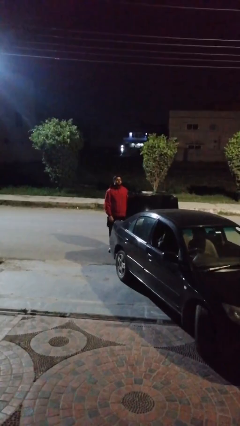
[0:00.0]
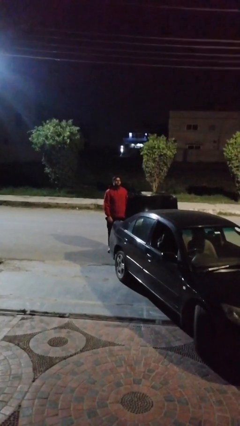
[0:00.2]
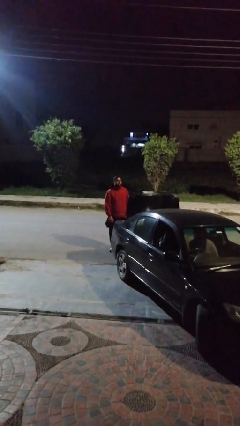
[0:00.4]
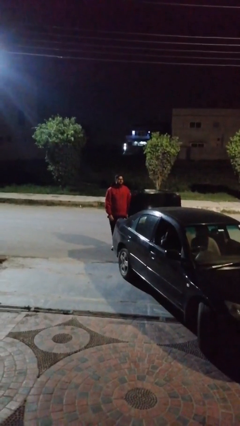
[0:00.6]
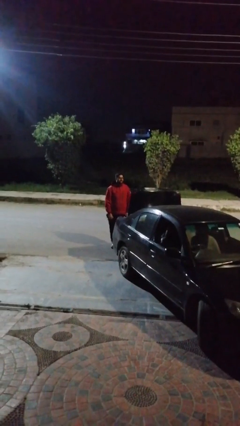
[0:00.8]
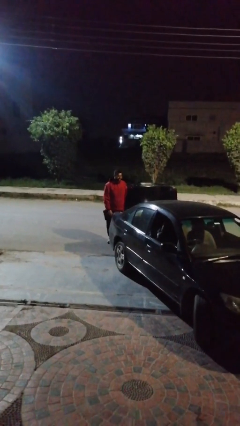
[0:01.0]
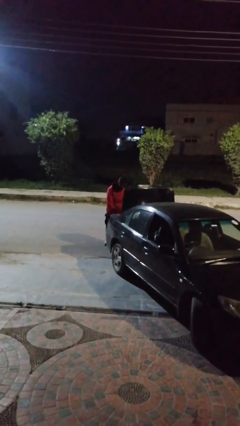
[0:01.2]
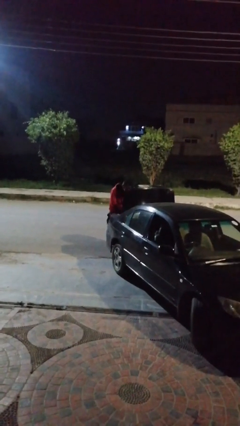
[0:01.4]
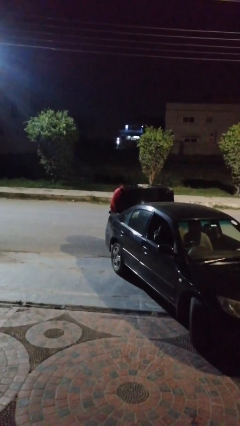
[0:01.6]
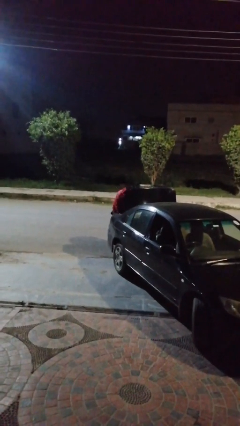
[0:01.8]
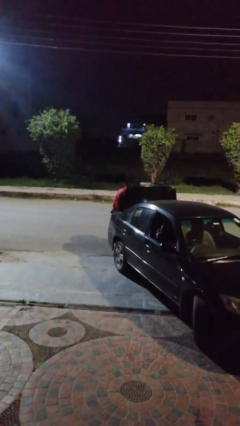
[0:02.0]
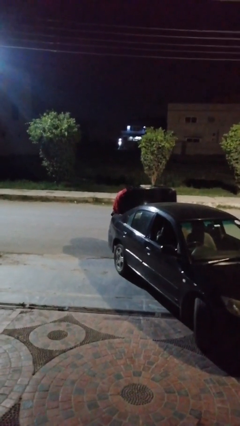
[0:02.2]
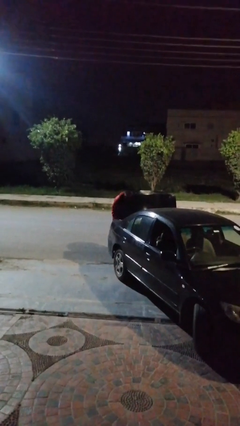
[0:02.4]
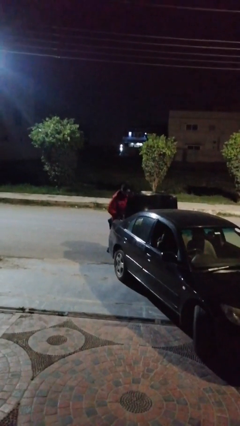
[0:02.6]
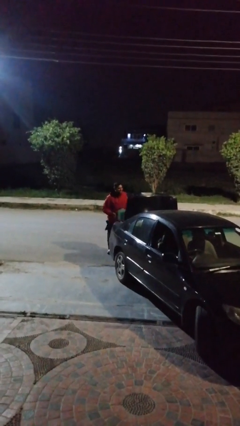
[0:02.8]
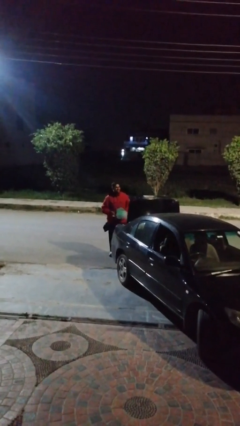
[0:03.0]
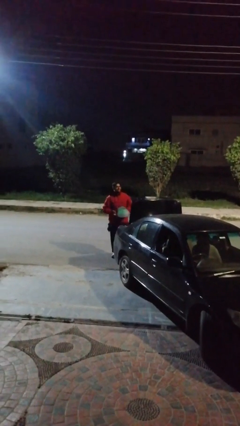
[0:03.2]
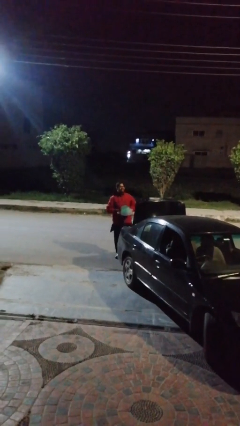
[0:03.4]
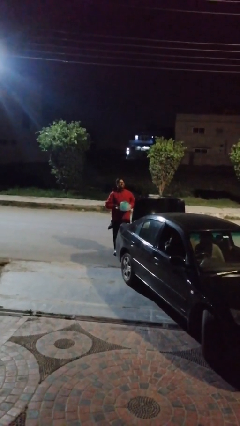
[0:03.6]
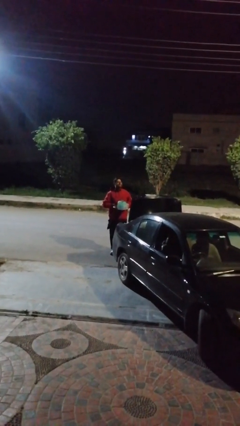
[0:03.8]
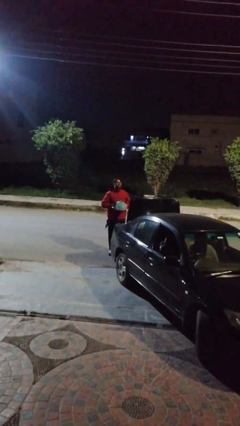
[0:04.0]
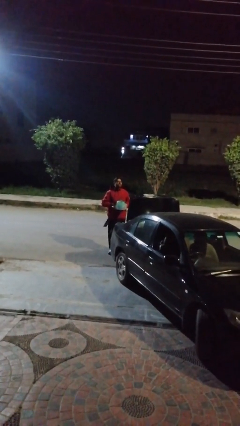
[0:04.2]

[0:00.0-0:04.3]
person unloads car

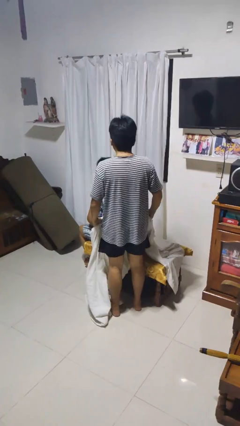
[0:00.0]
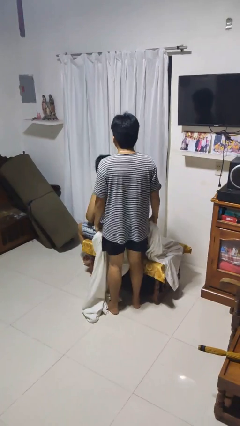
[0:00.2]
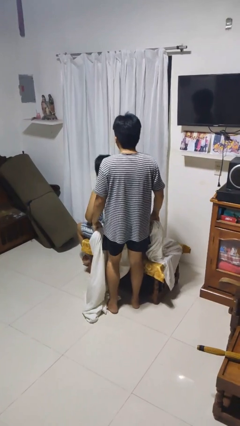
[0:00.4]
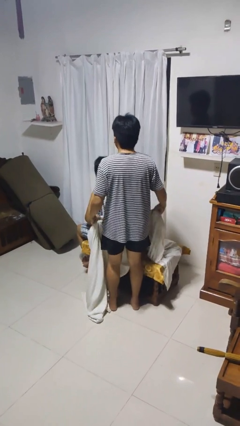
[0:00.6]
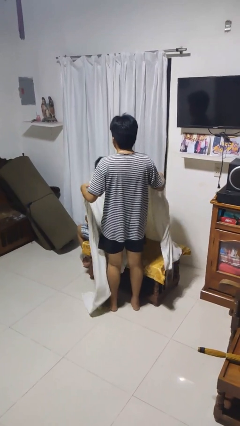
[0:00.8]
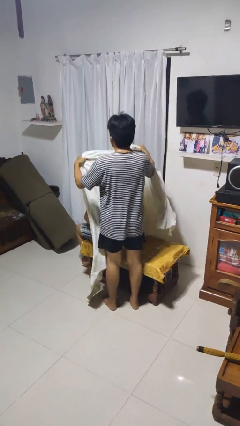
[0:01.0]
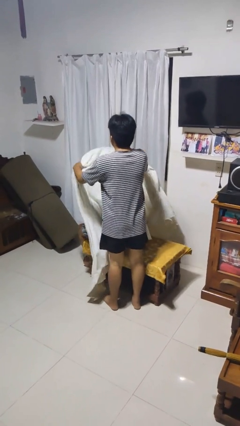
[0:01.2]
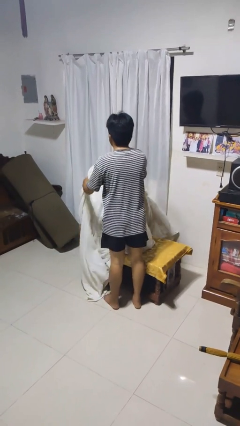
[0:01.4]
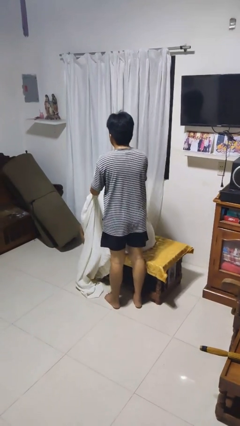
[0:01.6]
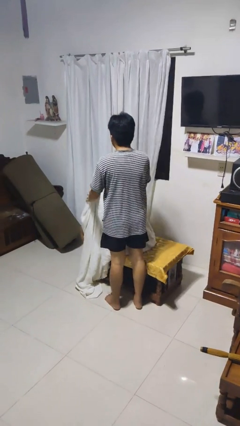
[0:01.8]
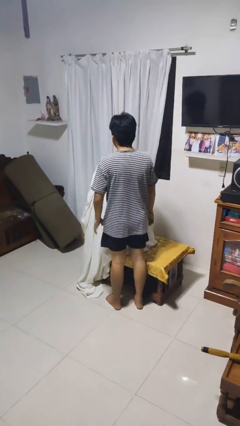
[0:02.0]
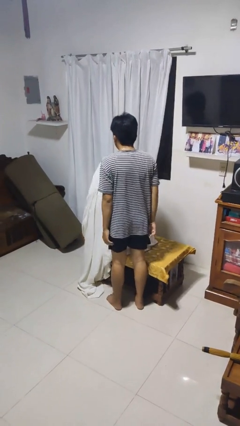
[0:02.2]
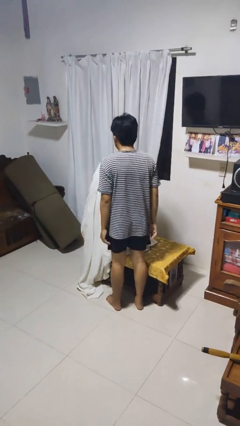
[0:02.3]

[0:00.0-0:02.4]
person covers friend with blanket

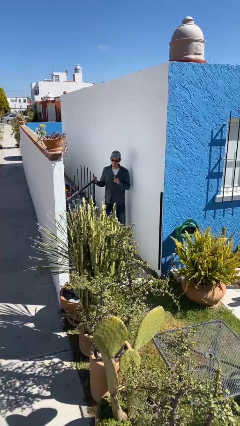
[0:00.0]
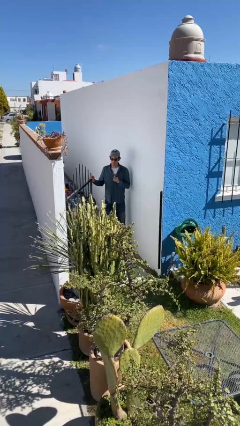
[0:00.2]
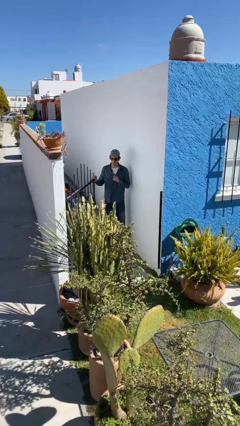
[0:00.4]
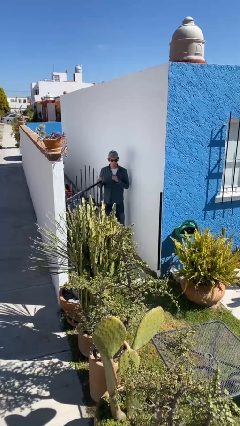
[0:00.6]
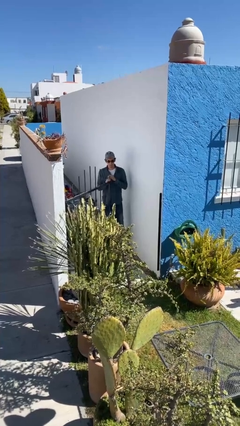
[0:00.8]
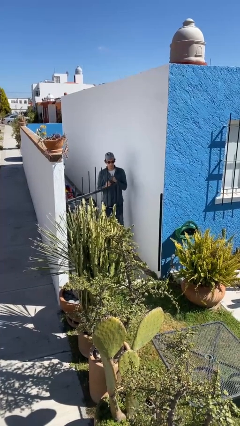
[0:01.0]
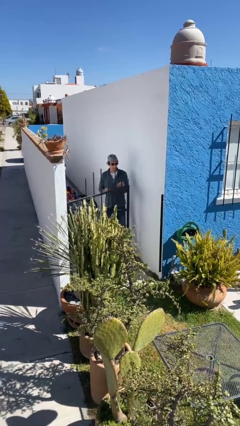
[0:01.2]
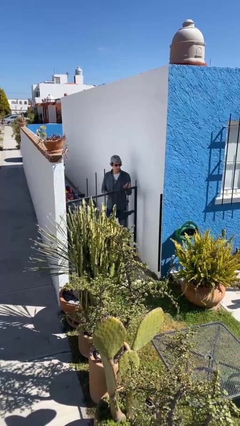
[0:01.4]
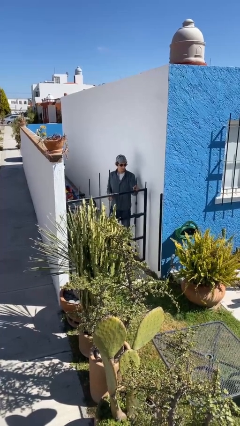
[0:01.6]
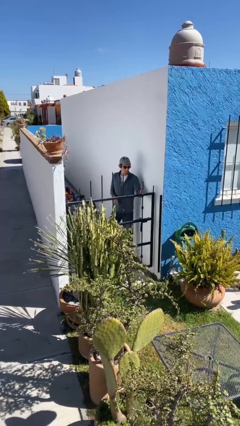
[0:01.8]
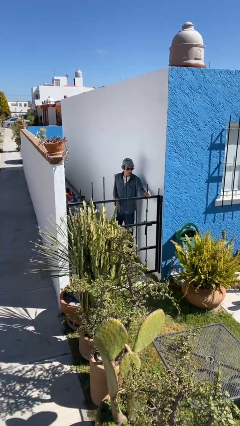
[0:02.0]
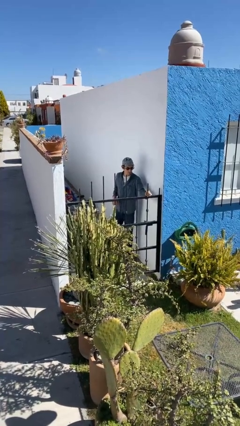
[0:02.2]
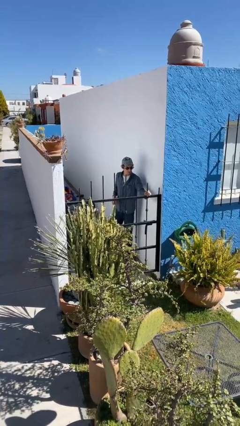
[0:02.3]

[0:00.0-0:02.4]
person closes facility door

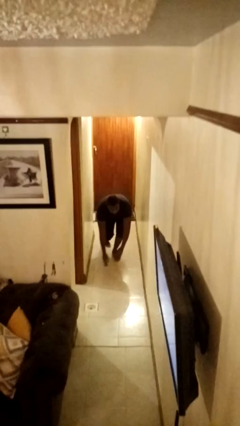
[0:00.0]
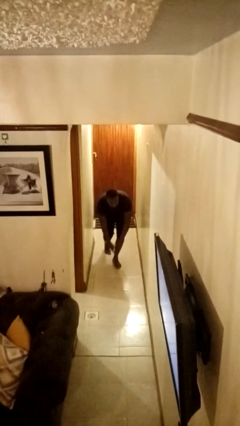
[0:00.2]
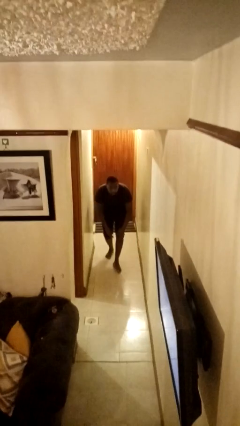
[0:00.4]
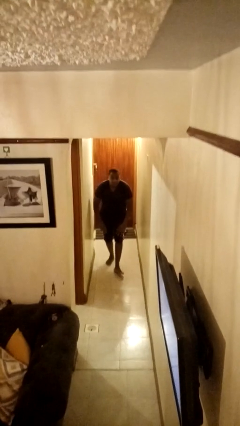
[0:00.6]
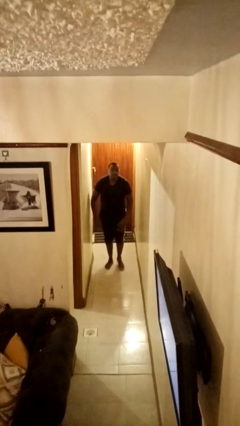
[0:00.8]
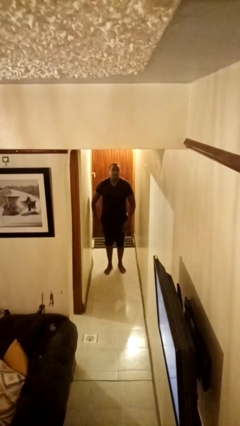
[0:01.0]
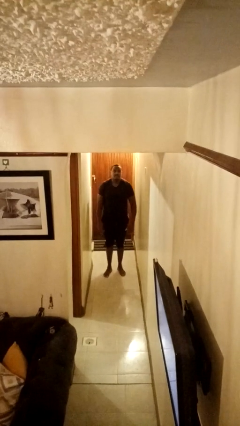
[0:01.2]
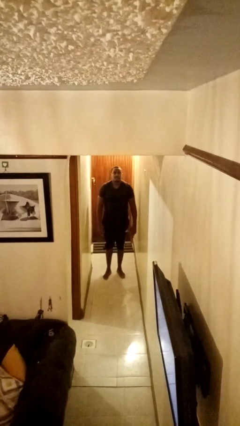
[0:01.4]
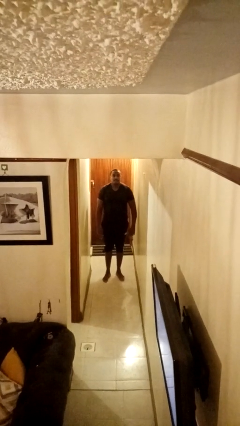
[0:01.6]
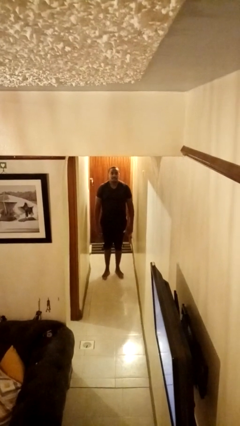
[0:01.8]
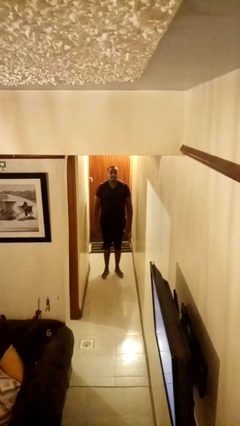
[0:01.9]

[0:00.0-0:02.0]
person stands up from floor

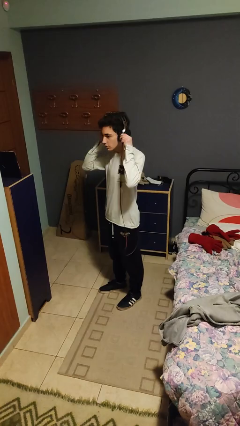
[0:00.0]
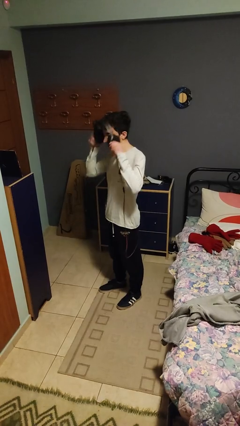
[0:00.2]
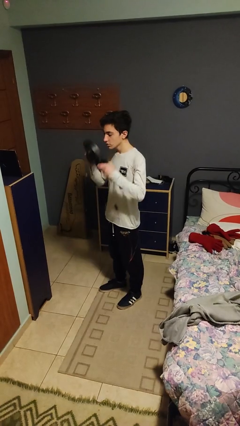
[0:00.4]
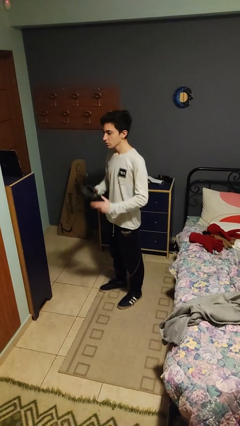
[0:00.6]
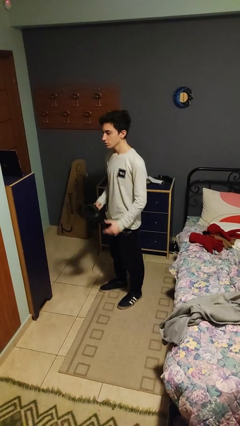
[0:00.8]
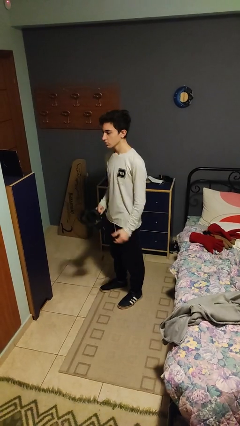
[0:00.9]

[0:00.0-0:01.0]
person takes off headphones

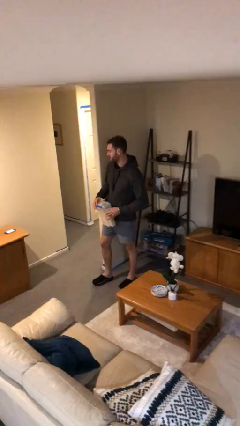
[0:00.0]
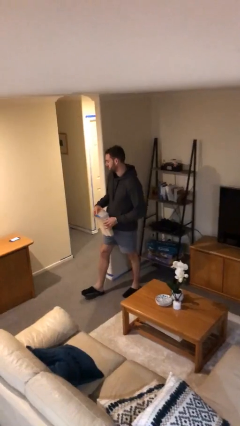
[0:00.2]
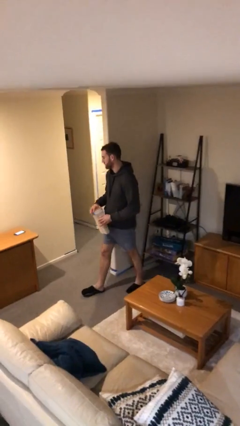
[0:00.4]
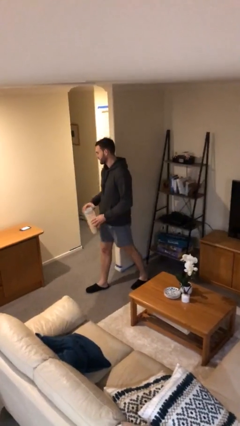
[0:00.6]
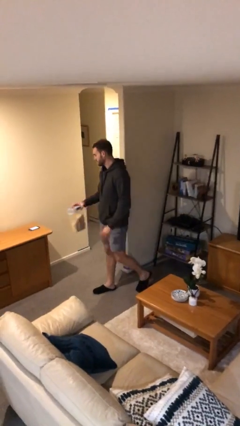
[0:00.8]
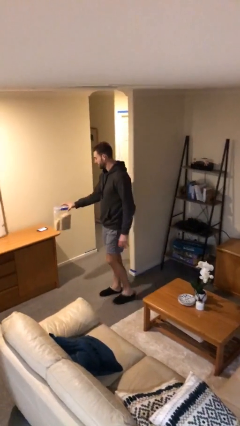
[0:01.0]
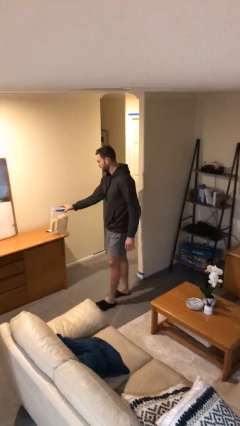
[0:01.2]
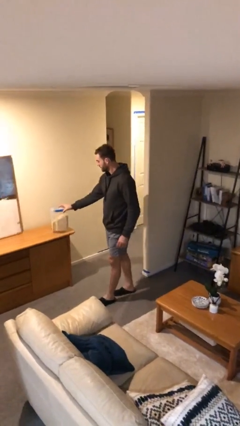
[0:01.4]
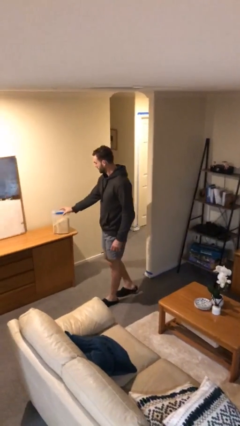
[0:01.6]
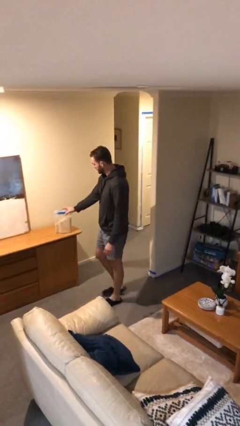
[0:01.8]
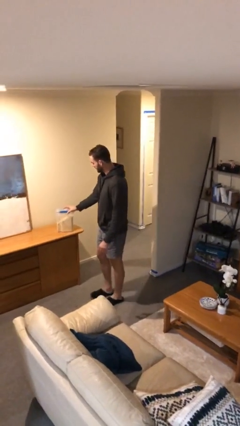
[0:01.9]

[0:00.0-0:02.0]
person puts down object on table

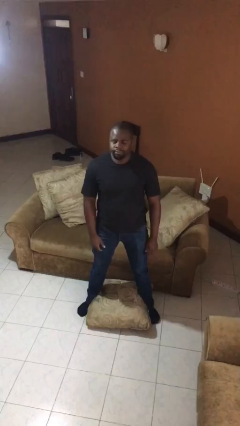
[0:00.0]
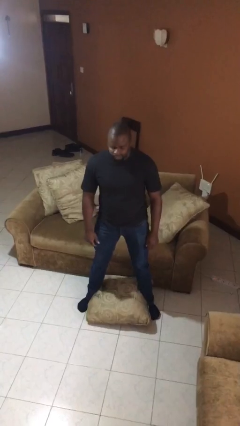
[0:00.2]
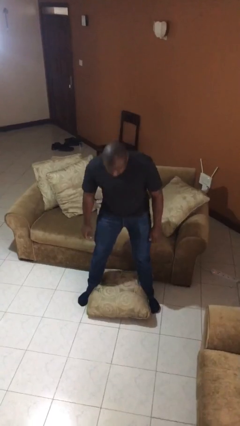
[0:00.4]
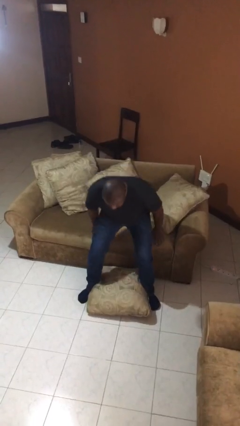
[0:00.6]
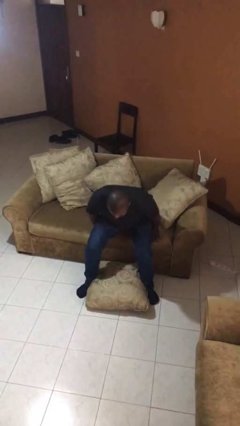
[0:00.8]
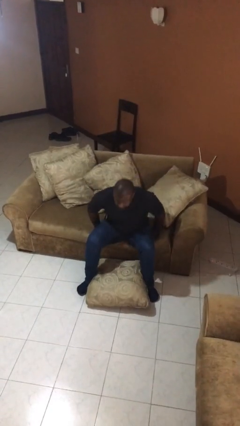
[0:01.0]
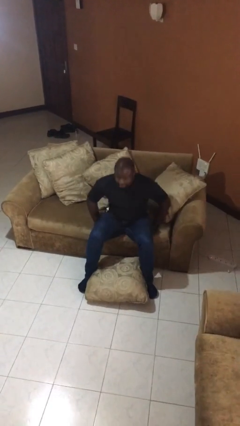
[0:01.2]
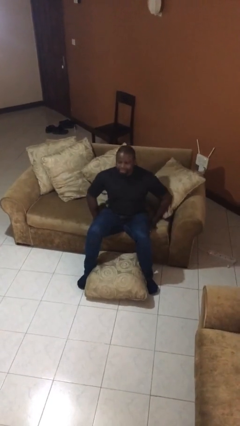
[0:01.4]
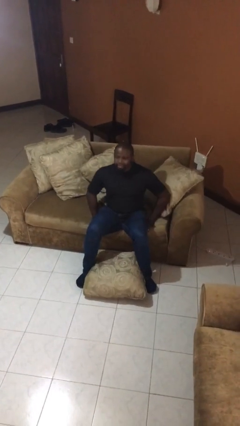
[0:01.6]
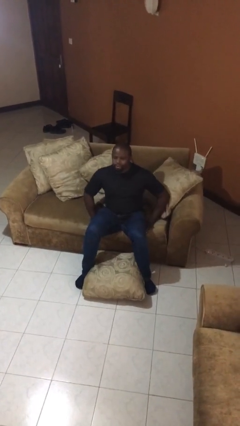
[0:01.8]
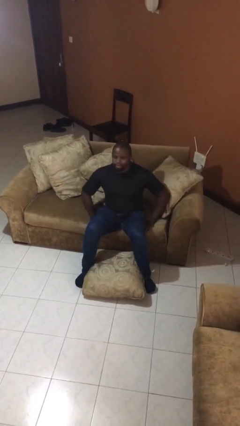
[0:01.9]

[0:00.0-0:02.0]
person sits down

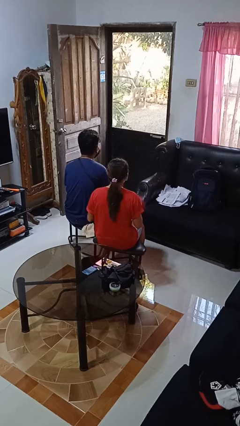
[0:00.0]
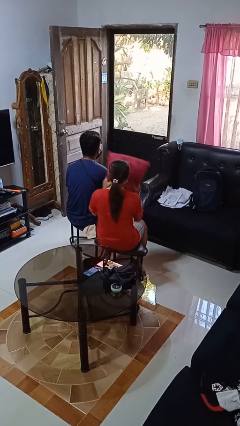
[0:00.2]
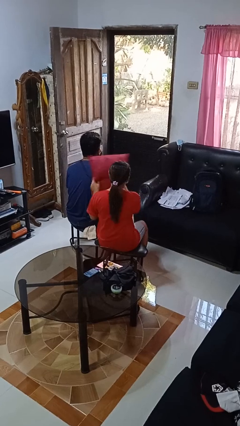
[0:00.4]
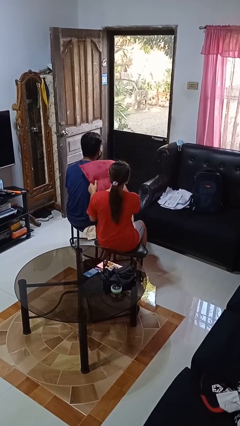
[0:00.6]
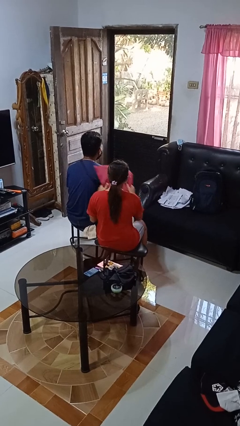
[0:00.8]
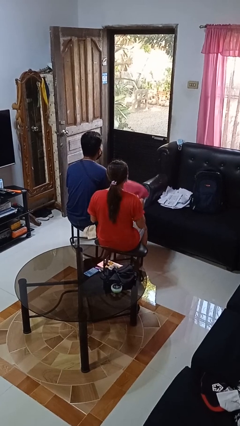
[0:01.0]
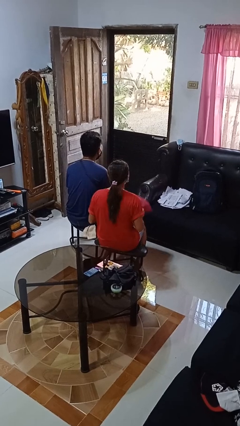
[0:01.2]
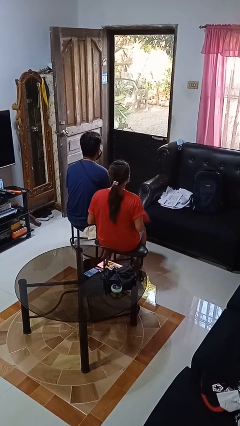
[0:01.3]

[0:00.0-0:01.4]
person hits person with pillow
